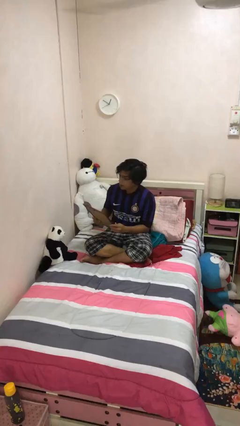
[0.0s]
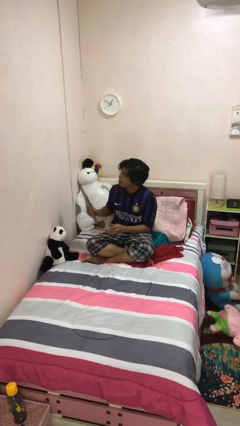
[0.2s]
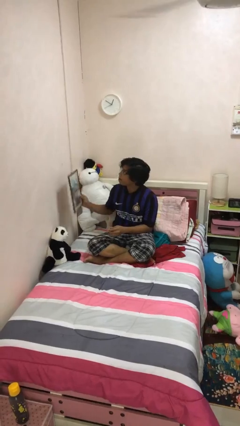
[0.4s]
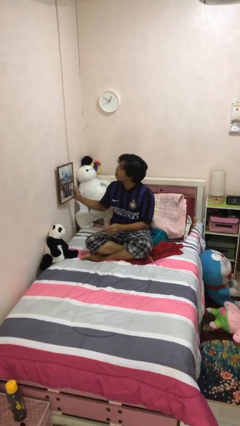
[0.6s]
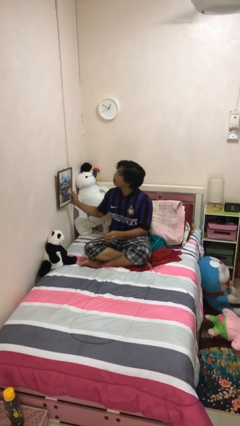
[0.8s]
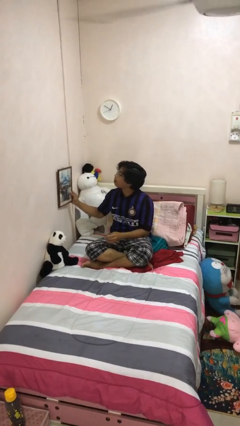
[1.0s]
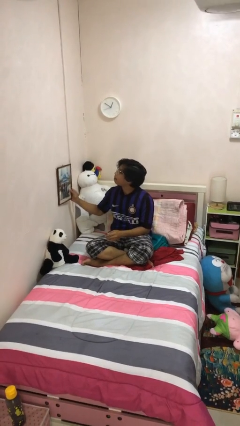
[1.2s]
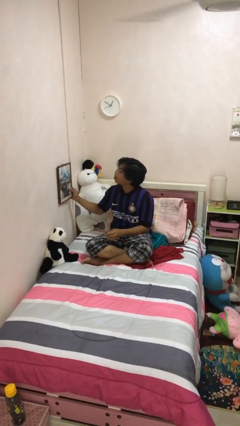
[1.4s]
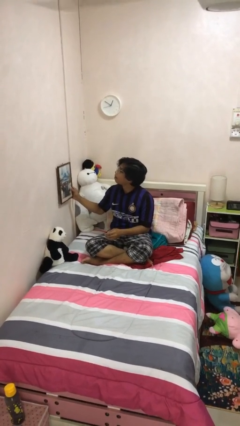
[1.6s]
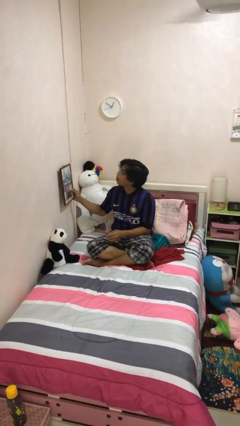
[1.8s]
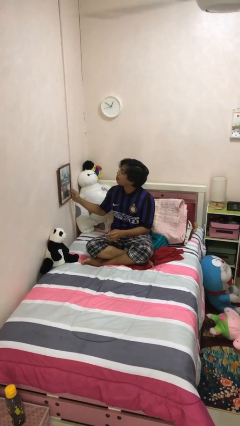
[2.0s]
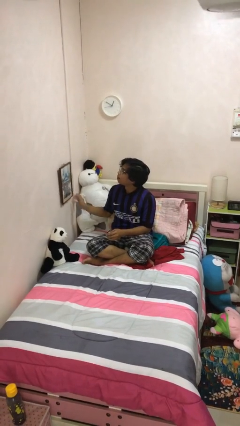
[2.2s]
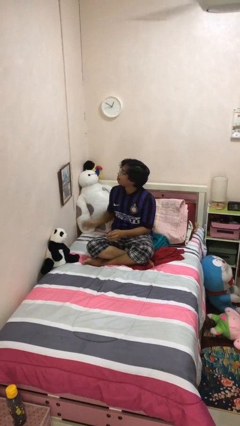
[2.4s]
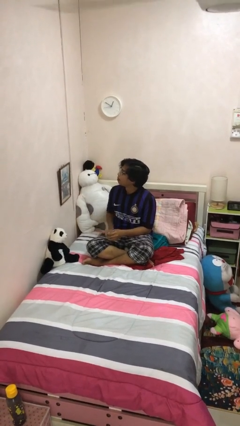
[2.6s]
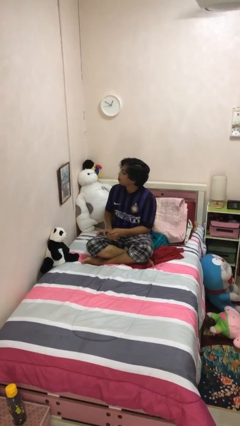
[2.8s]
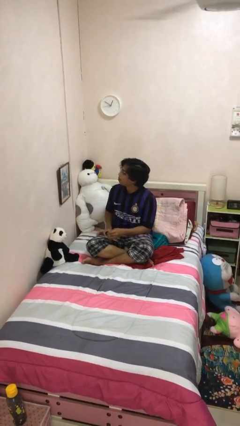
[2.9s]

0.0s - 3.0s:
person puts up picture frame

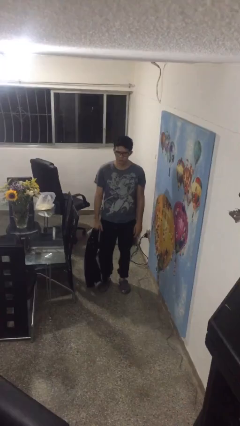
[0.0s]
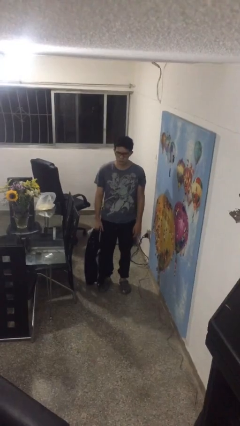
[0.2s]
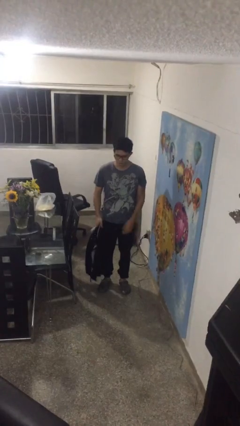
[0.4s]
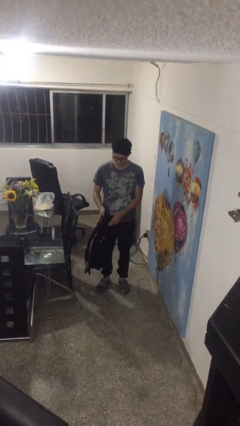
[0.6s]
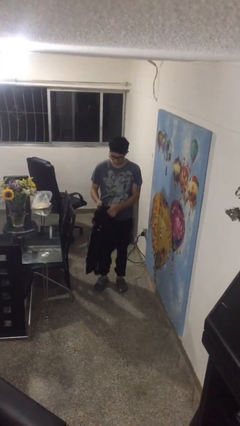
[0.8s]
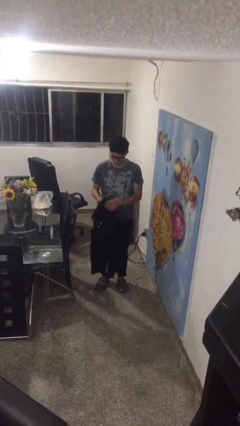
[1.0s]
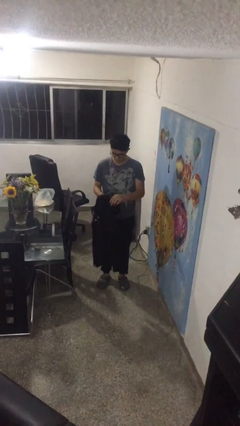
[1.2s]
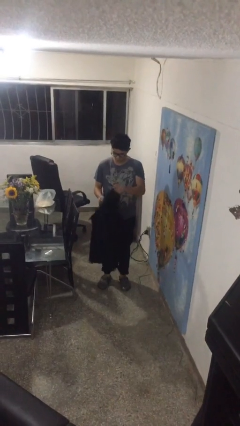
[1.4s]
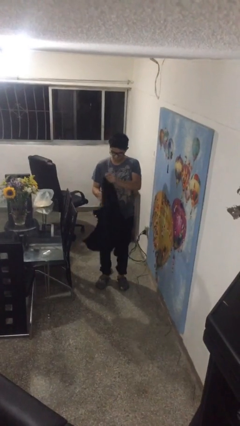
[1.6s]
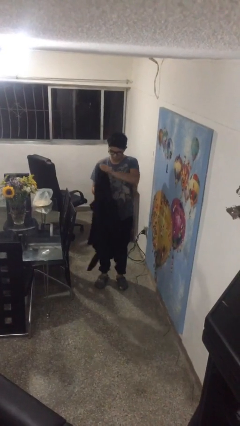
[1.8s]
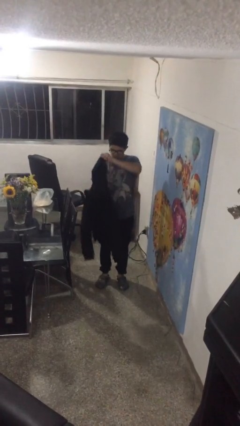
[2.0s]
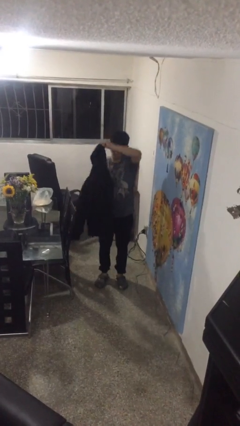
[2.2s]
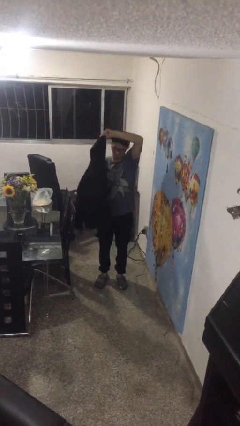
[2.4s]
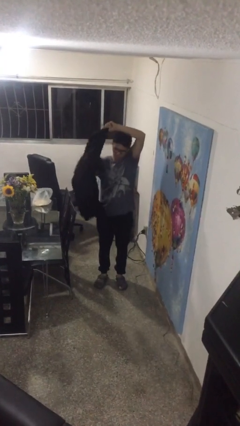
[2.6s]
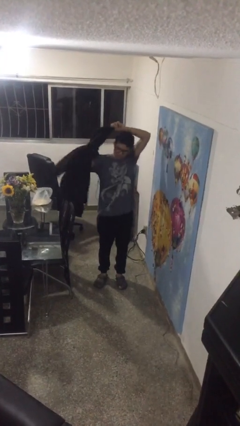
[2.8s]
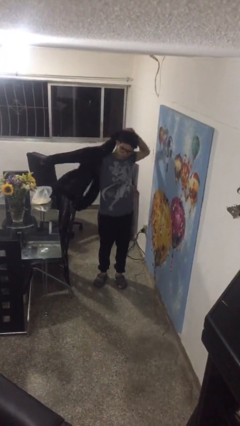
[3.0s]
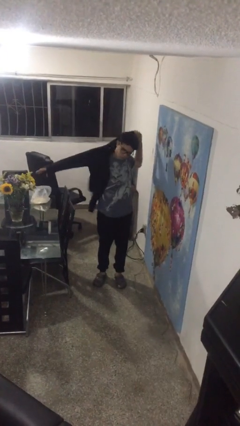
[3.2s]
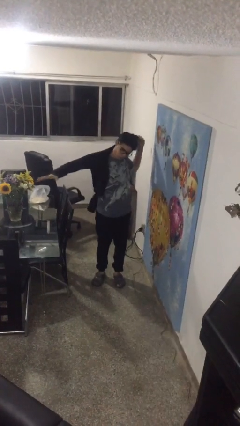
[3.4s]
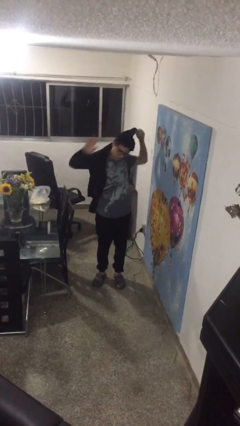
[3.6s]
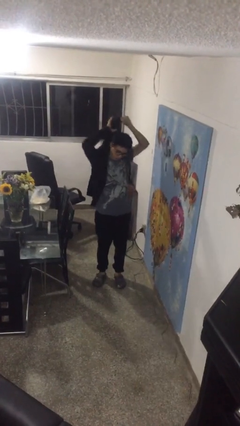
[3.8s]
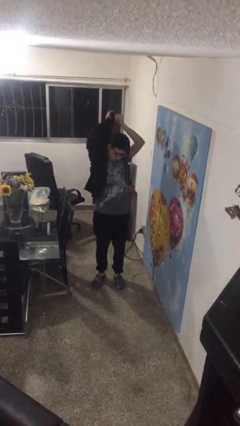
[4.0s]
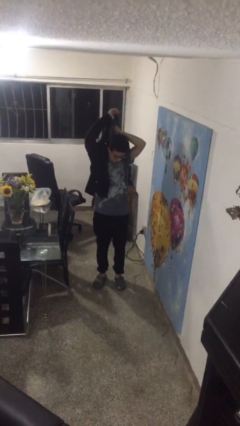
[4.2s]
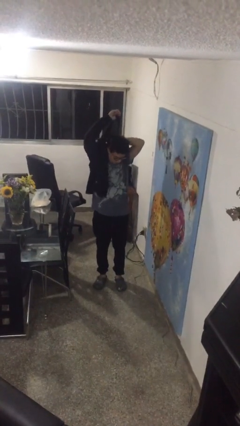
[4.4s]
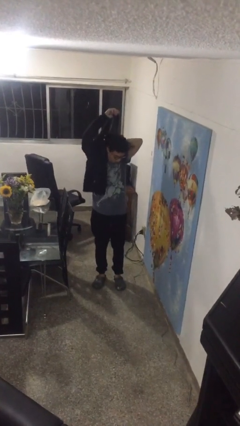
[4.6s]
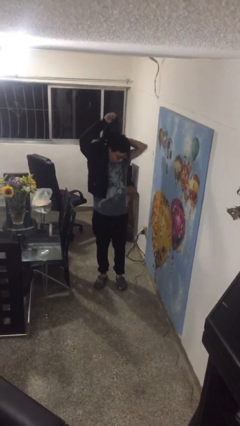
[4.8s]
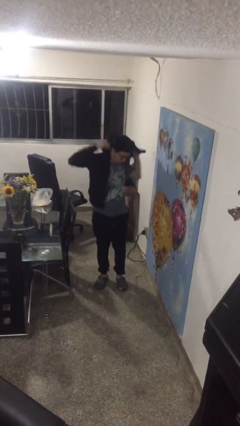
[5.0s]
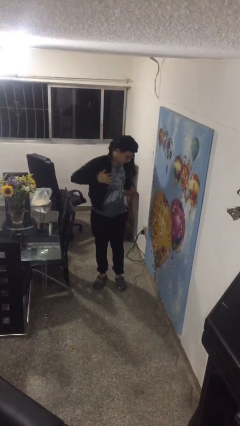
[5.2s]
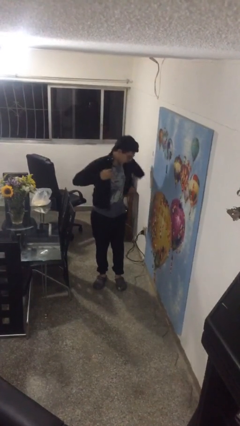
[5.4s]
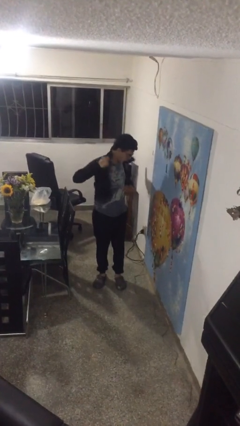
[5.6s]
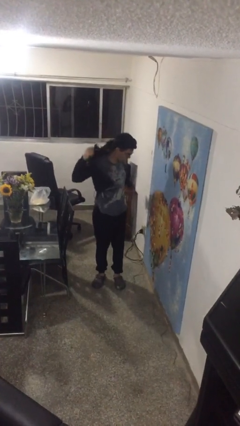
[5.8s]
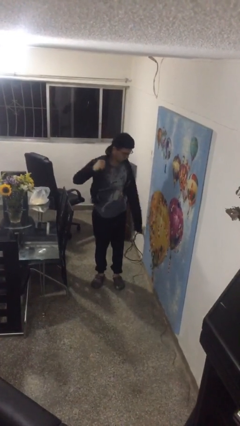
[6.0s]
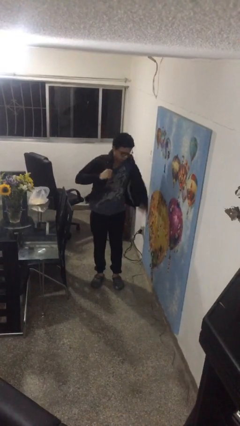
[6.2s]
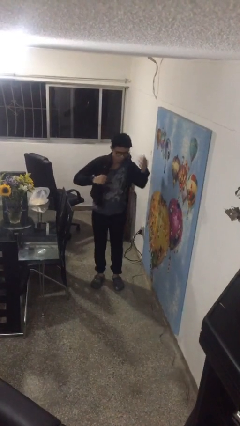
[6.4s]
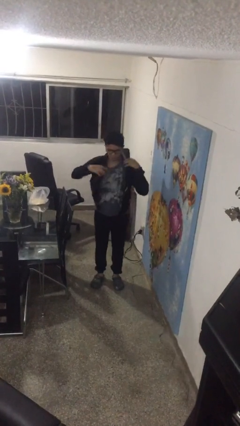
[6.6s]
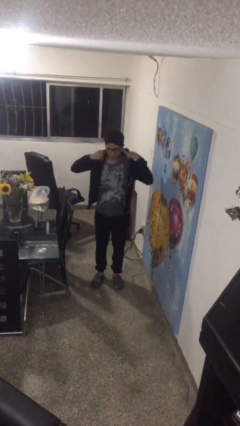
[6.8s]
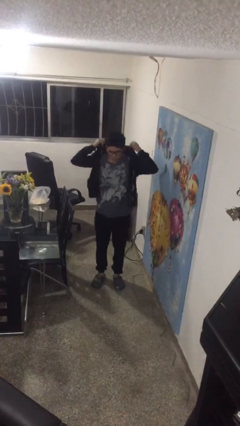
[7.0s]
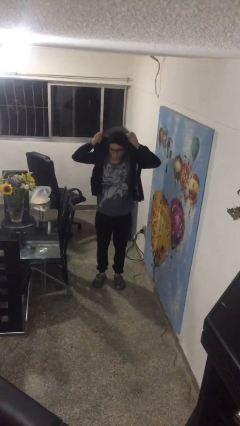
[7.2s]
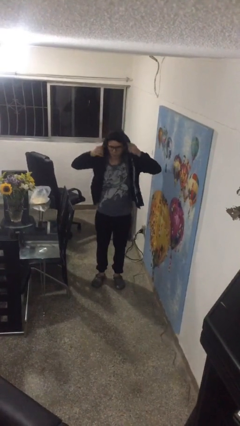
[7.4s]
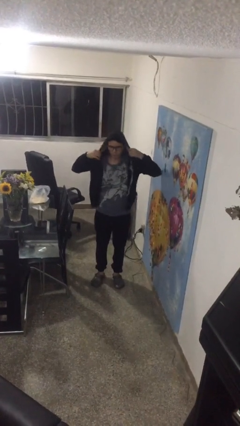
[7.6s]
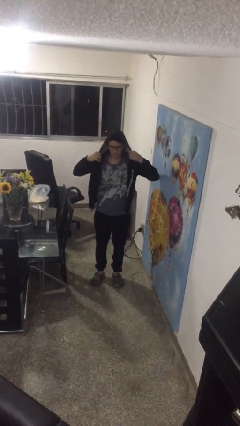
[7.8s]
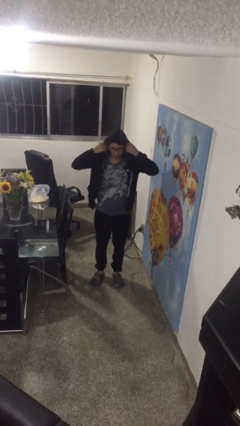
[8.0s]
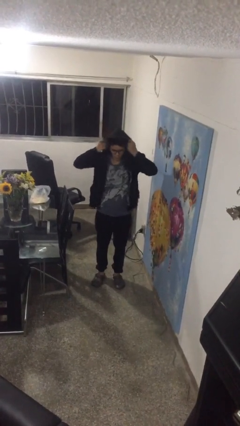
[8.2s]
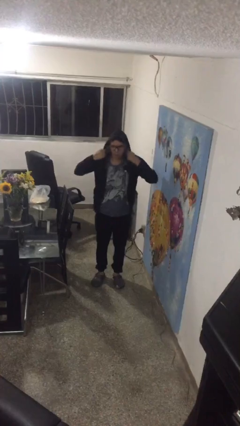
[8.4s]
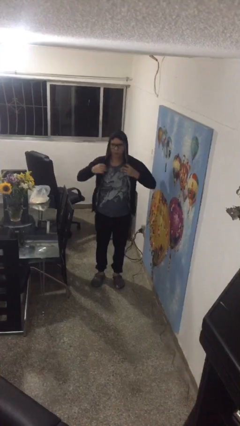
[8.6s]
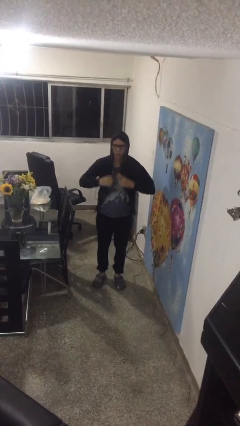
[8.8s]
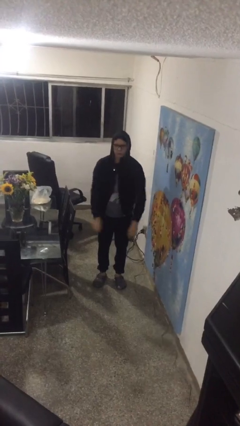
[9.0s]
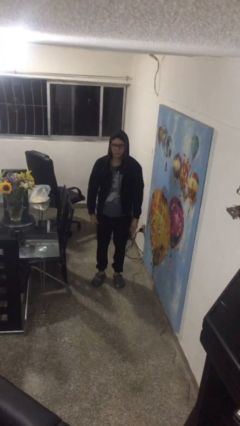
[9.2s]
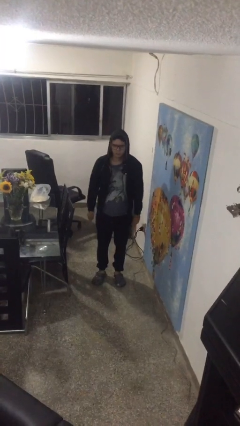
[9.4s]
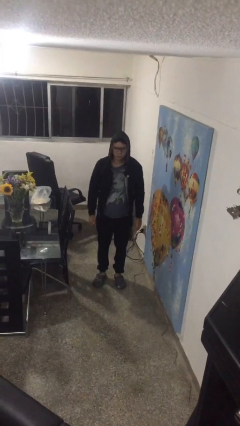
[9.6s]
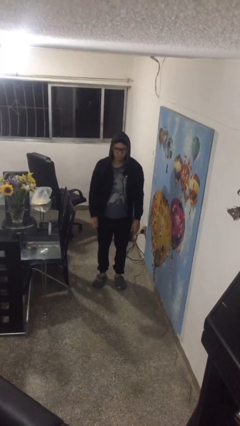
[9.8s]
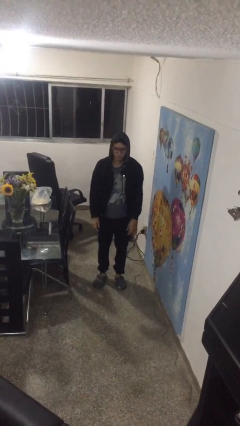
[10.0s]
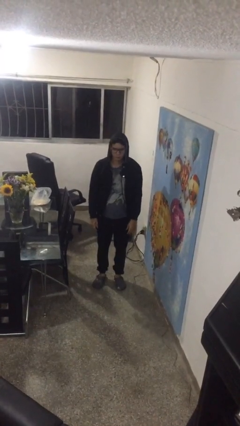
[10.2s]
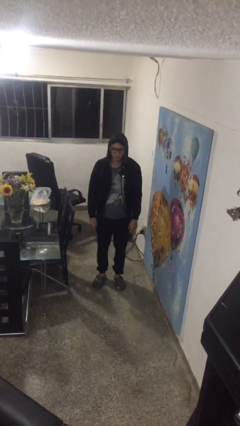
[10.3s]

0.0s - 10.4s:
person puts on hoodie

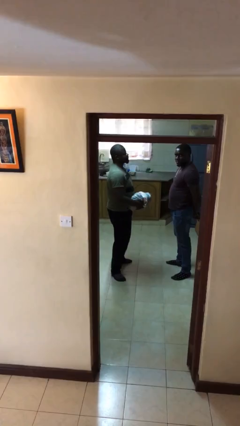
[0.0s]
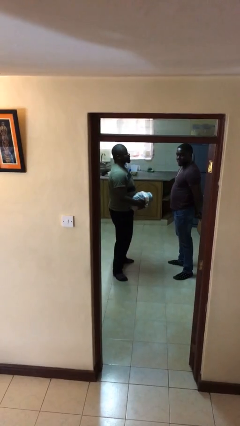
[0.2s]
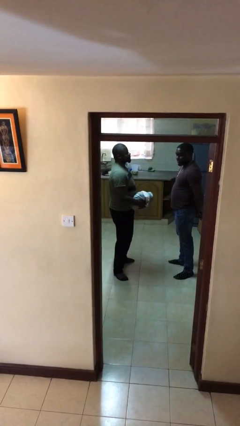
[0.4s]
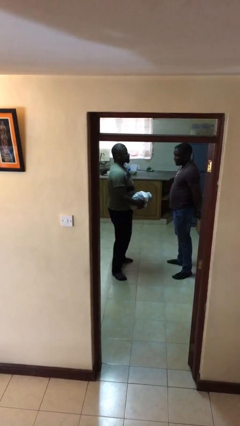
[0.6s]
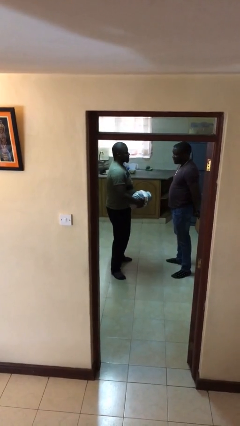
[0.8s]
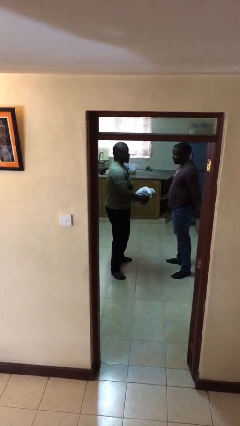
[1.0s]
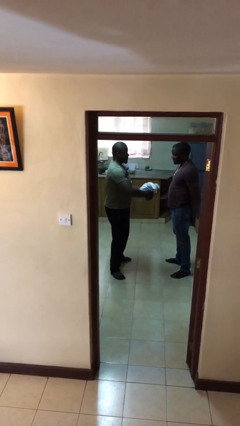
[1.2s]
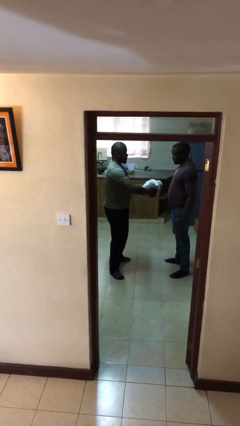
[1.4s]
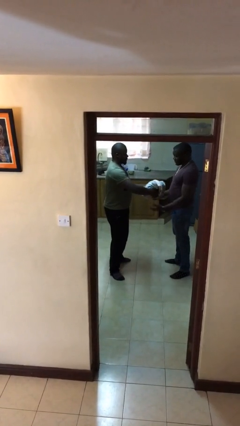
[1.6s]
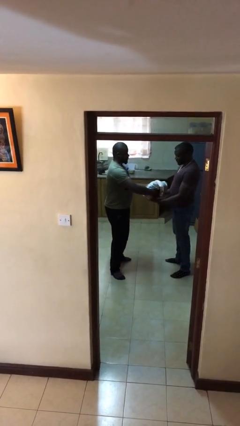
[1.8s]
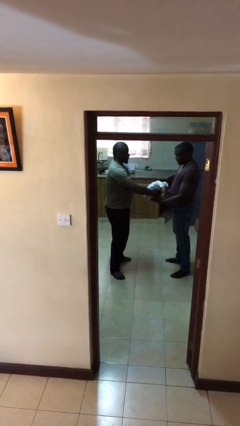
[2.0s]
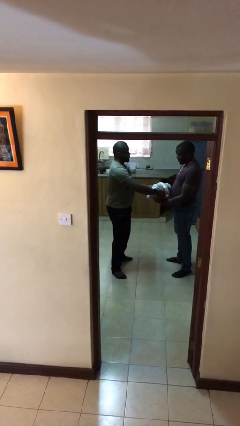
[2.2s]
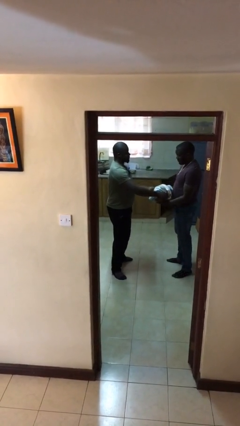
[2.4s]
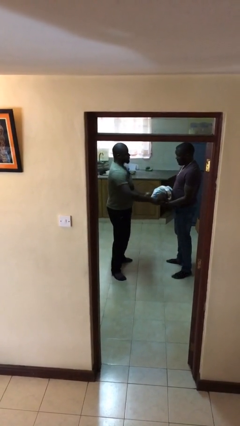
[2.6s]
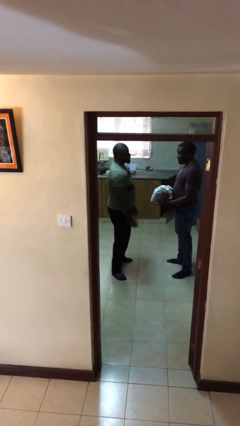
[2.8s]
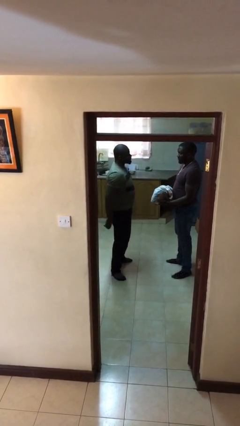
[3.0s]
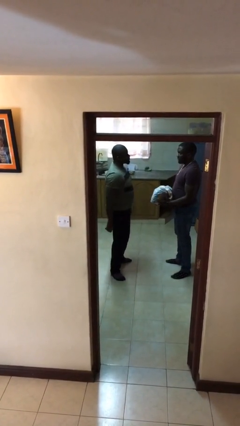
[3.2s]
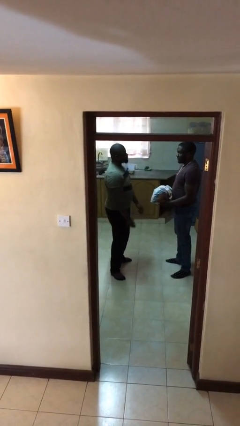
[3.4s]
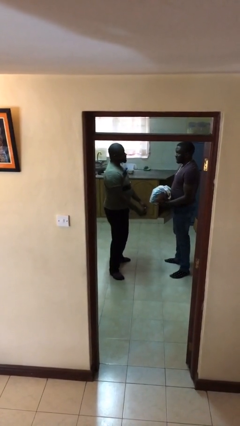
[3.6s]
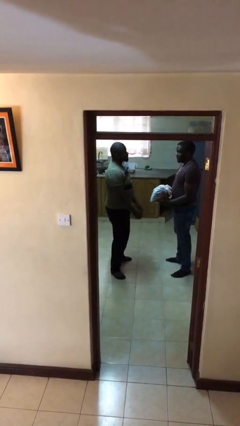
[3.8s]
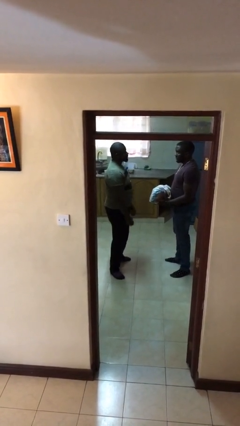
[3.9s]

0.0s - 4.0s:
person transfers object to person

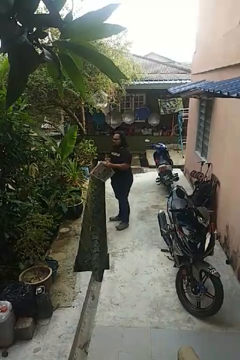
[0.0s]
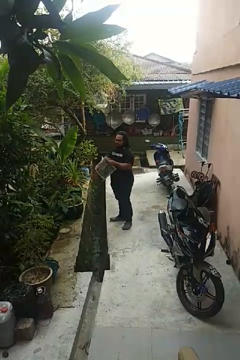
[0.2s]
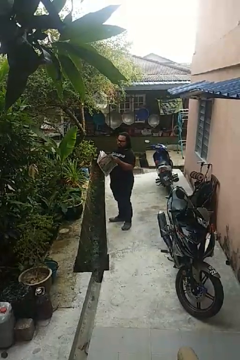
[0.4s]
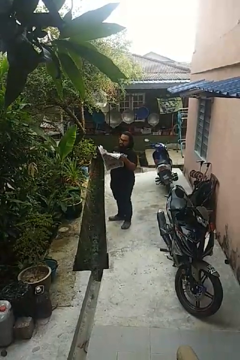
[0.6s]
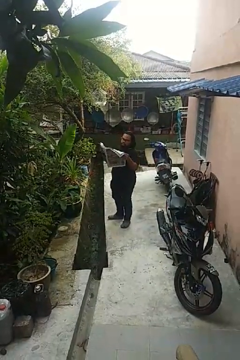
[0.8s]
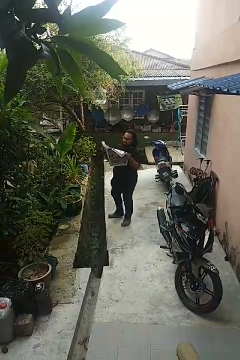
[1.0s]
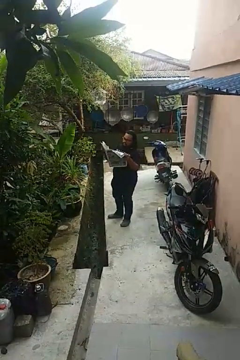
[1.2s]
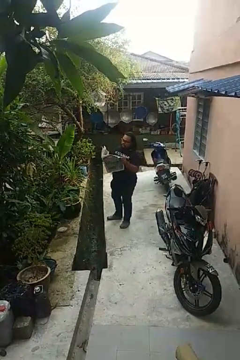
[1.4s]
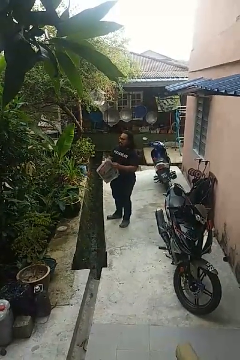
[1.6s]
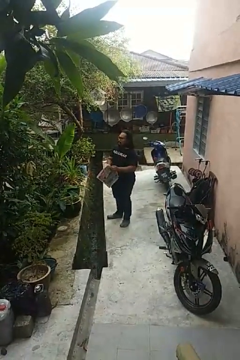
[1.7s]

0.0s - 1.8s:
person reads newspaper
